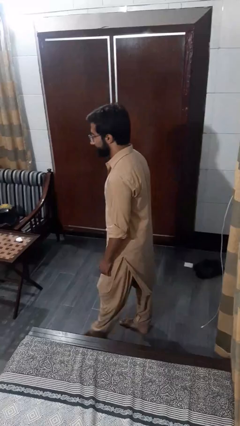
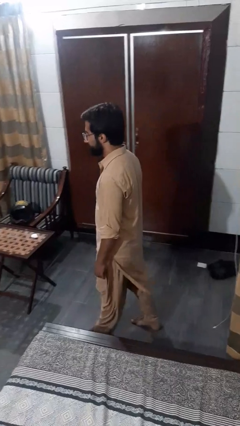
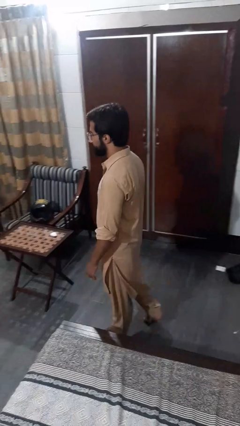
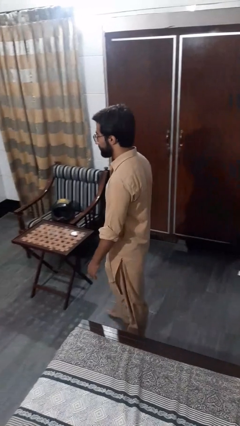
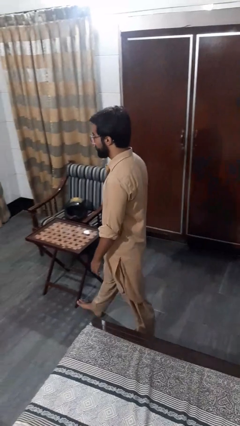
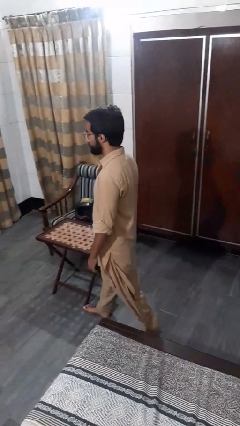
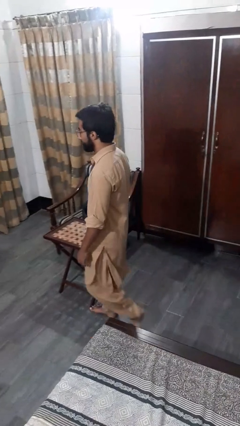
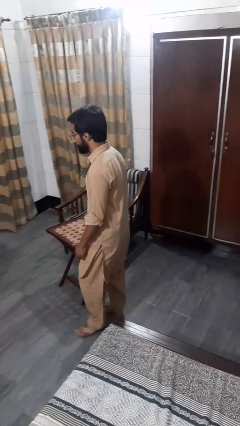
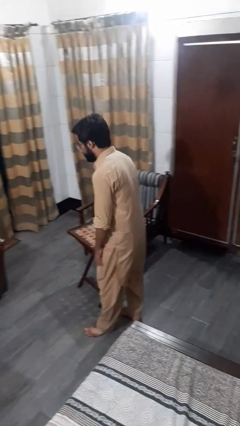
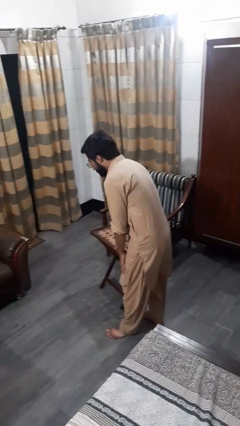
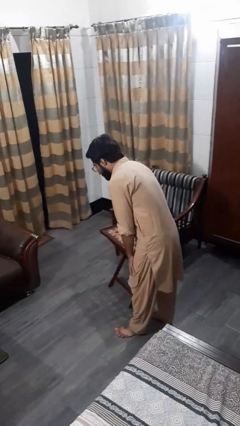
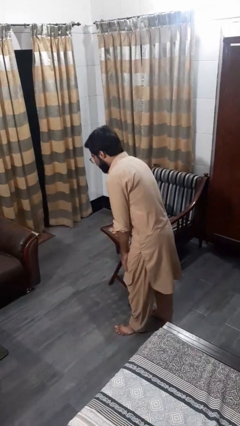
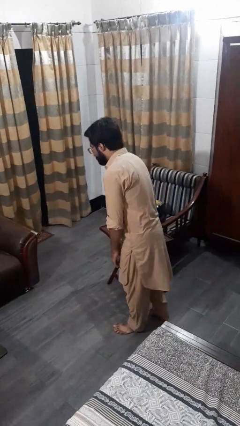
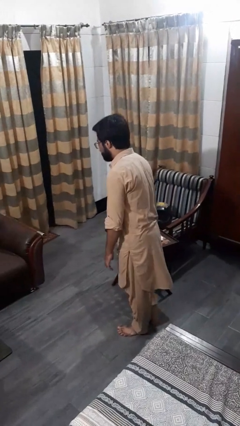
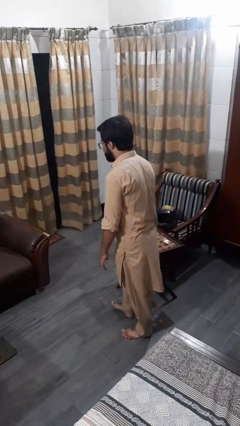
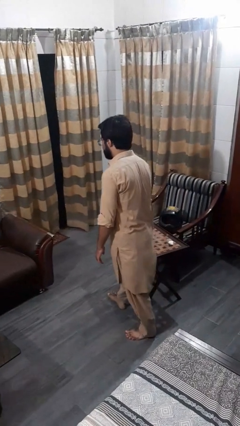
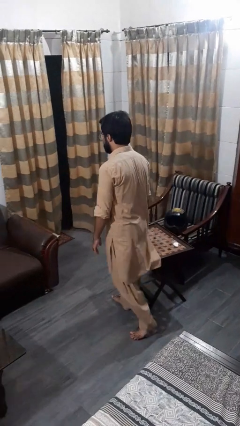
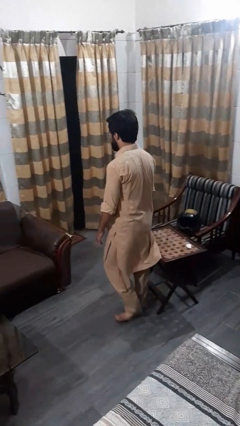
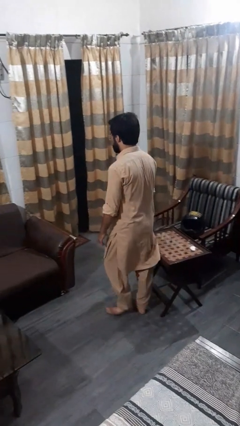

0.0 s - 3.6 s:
person bumps into table

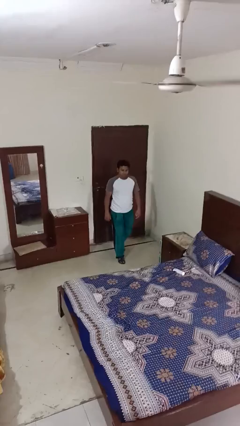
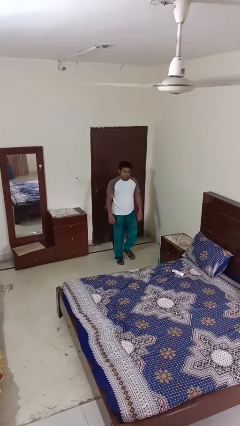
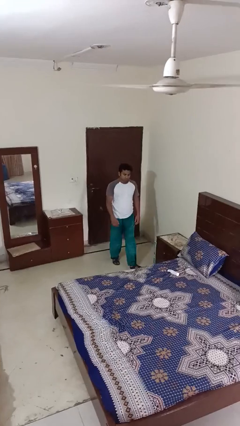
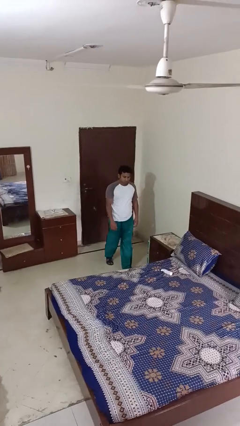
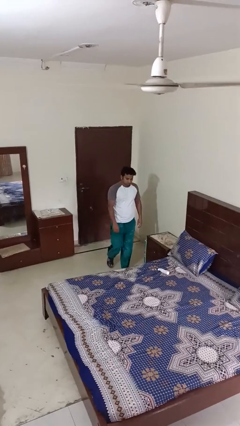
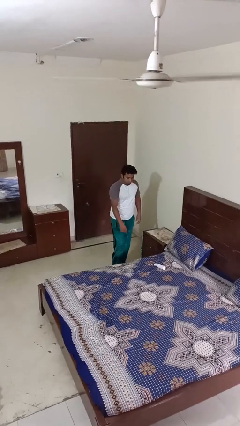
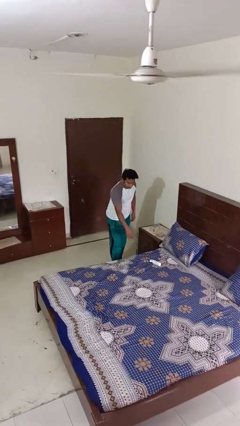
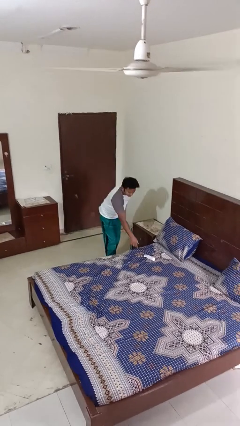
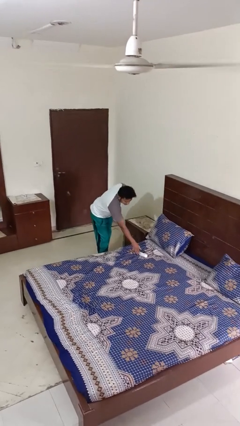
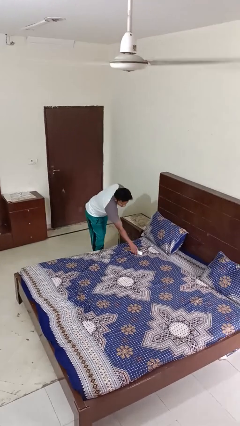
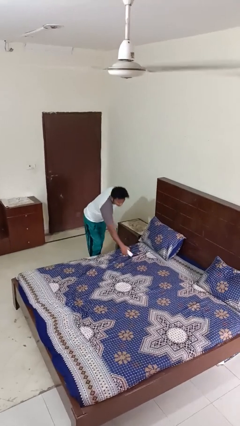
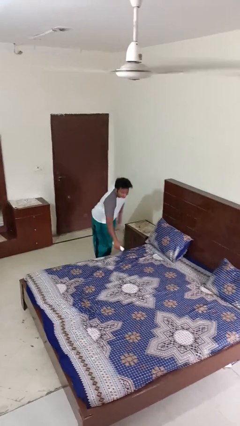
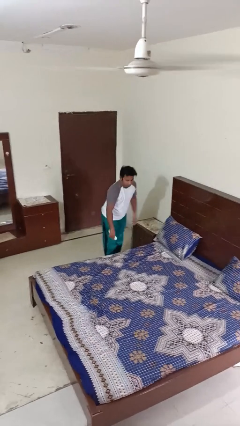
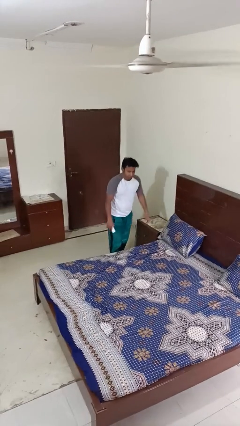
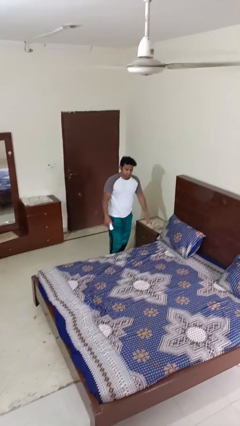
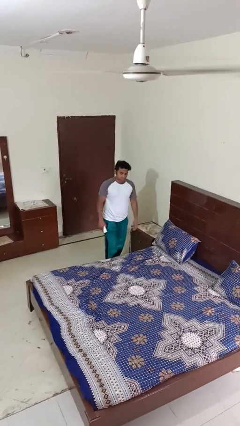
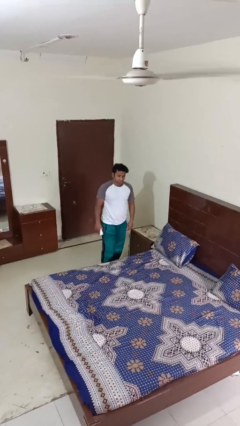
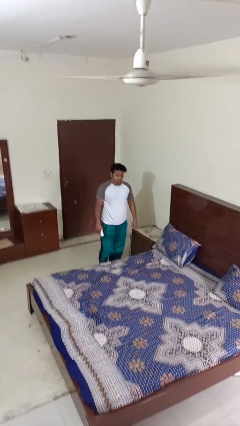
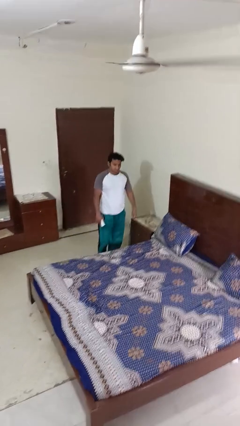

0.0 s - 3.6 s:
person picks up object from bed

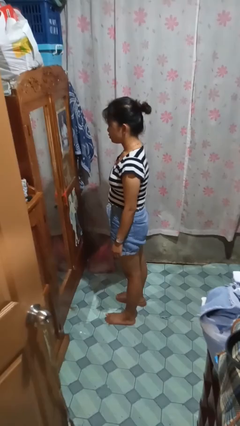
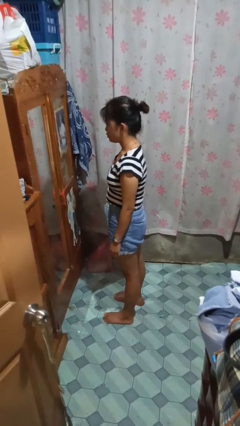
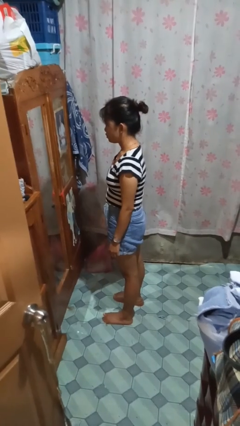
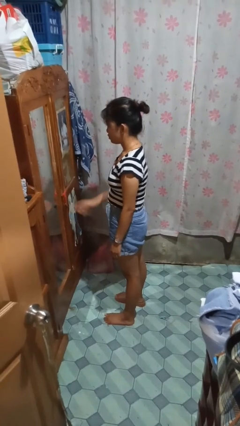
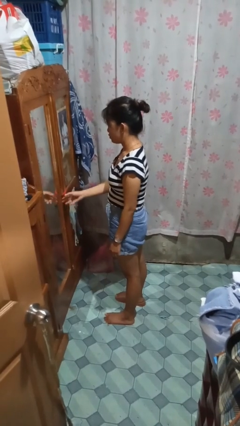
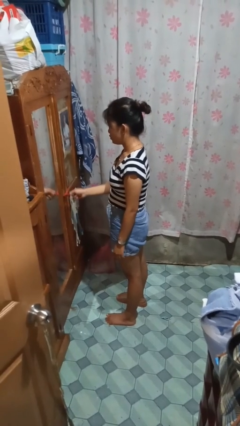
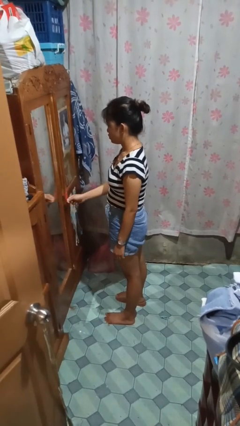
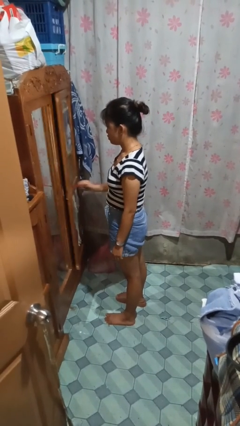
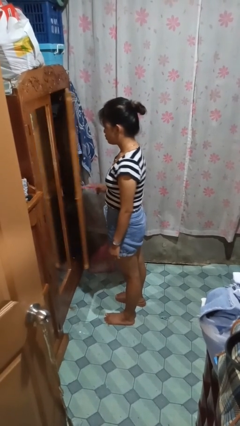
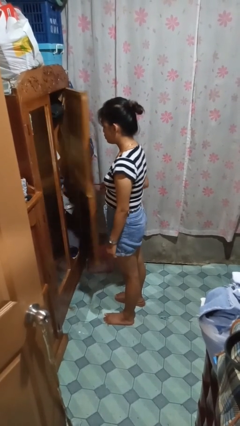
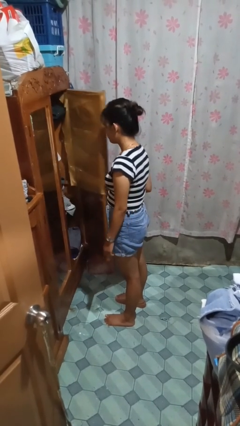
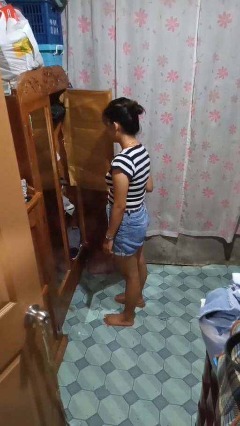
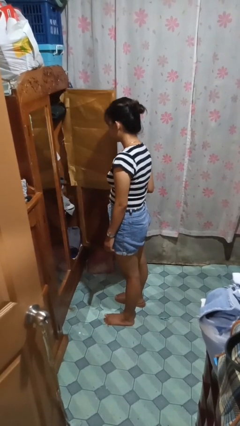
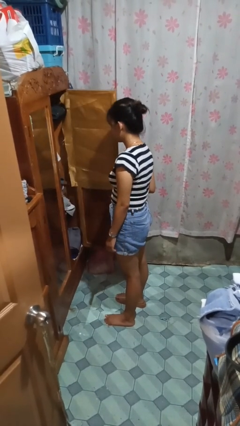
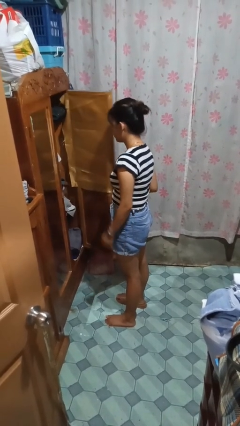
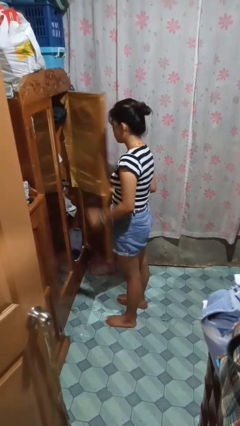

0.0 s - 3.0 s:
person opens closet door

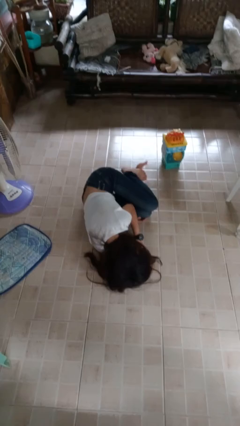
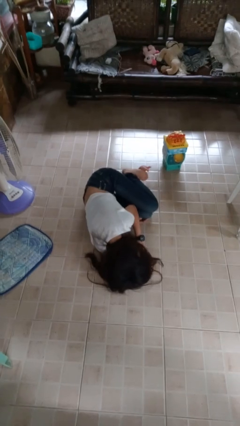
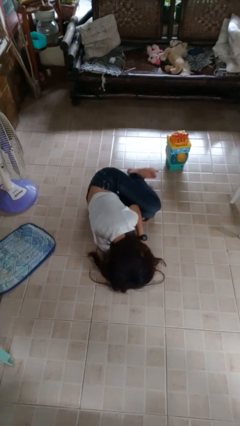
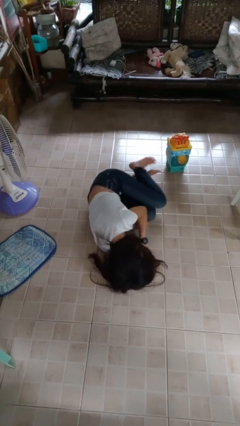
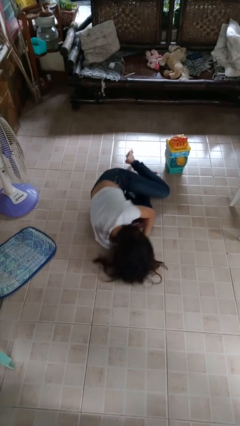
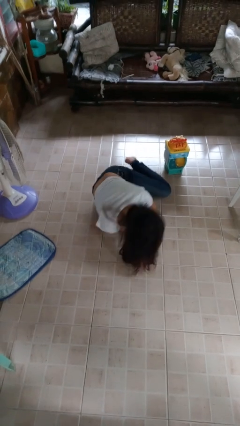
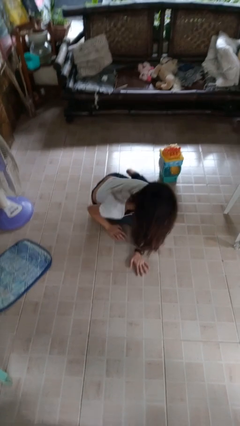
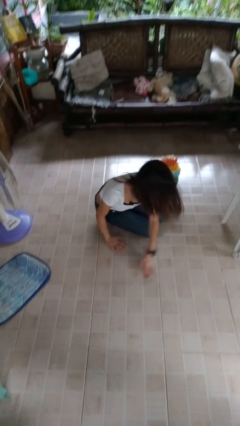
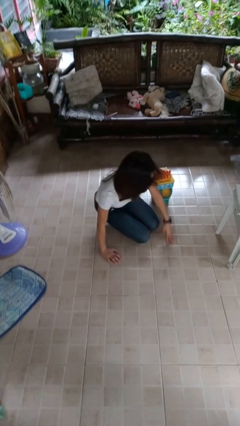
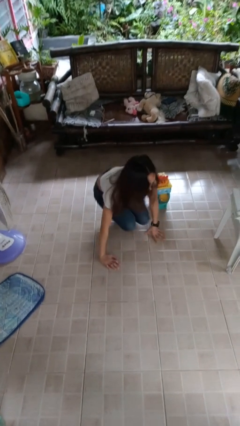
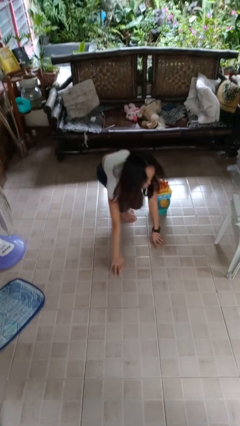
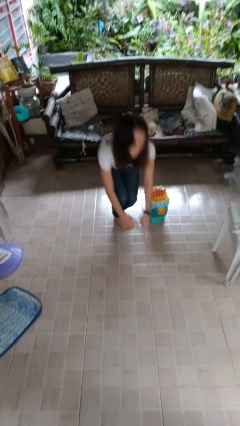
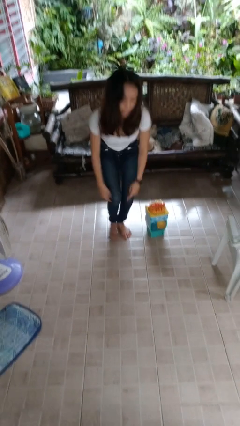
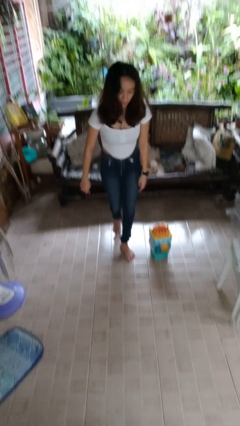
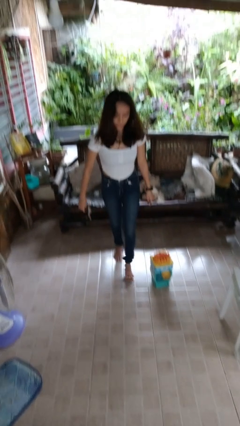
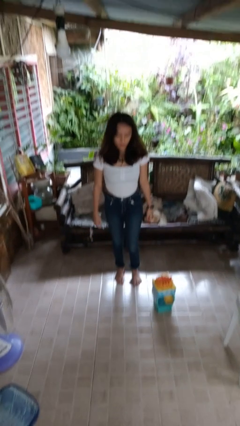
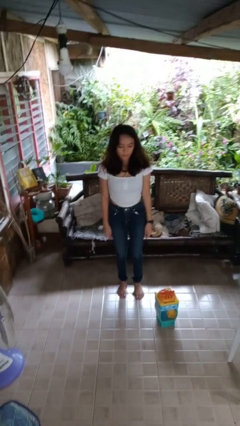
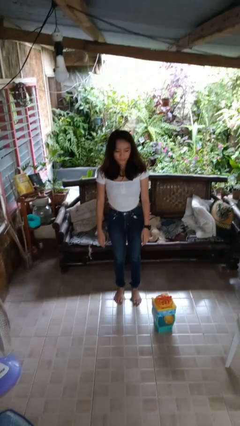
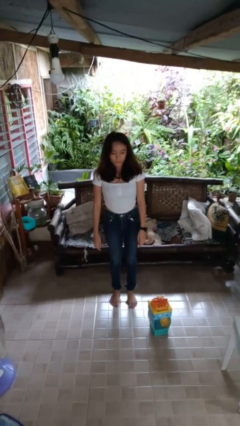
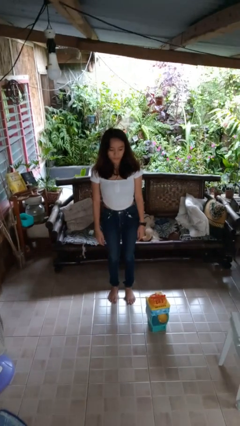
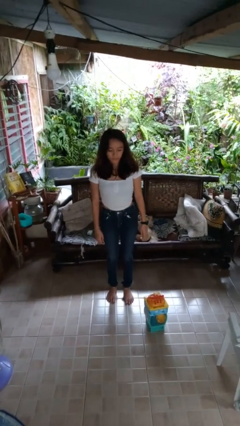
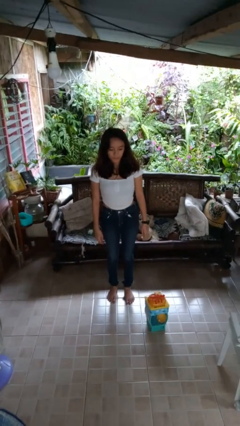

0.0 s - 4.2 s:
person stands up from floor

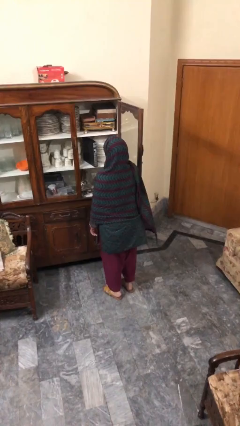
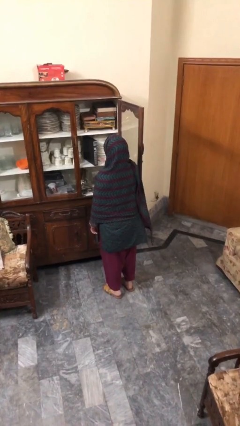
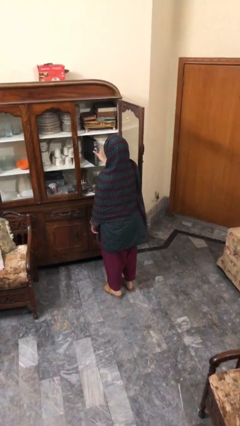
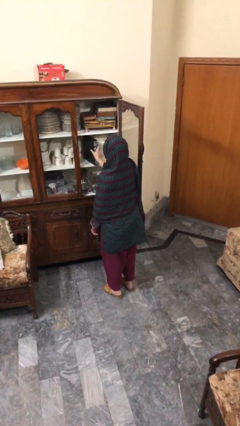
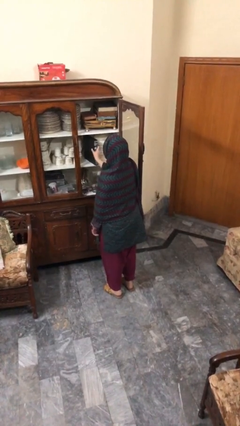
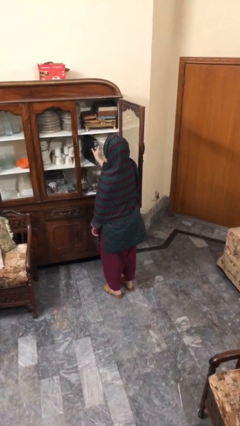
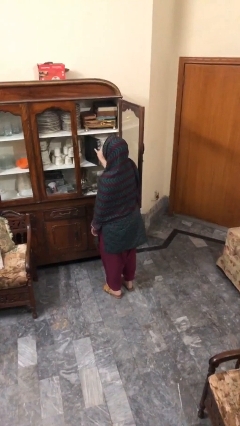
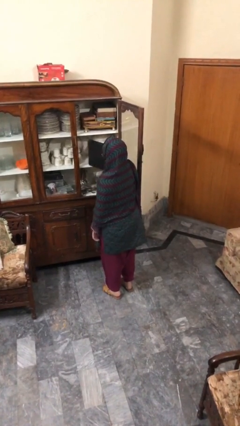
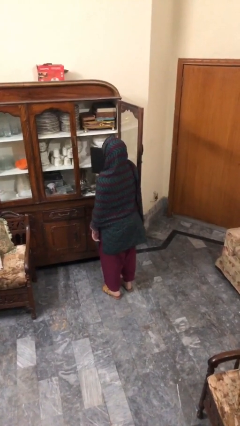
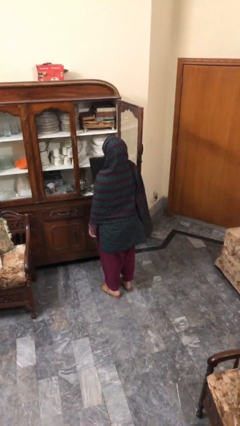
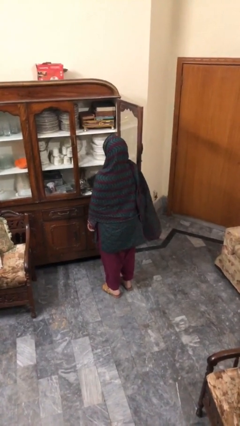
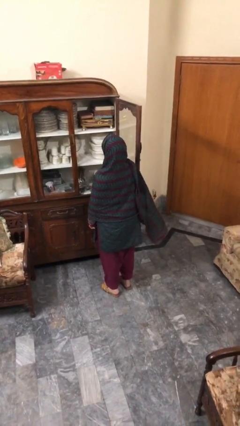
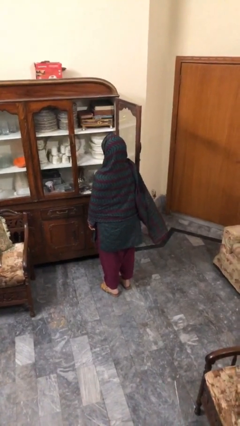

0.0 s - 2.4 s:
person picks up object from cabinet

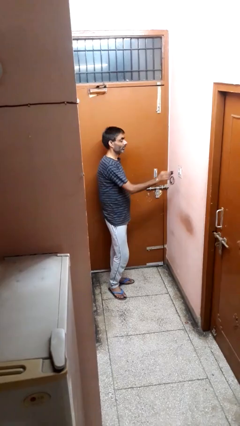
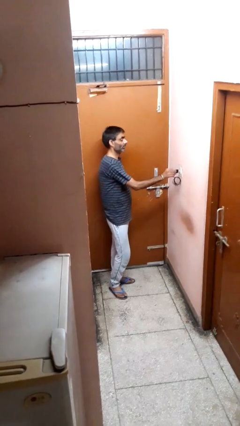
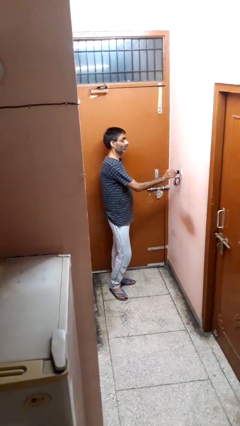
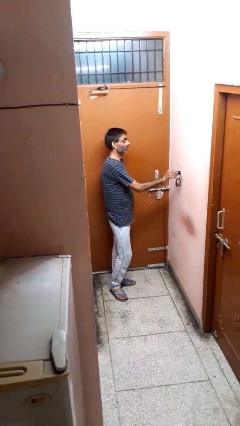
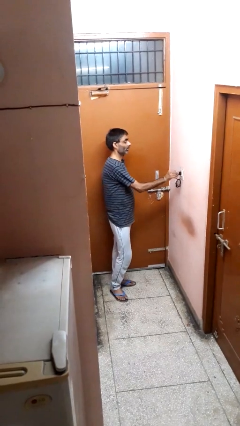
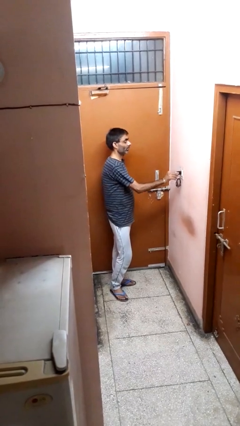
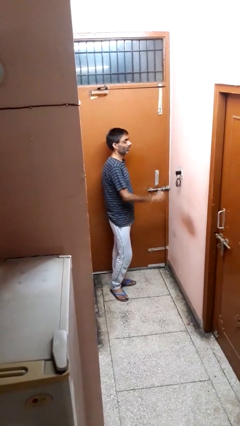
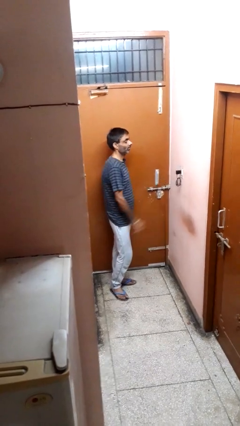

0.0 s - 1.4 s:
person plugs into electrical socket
